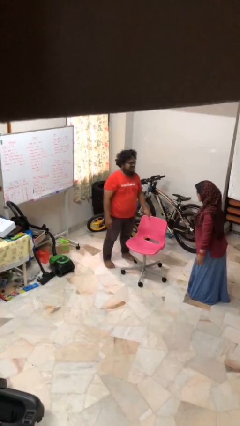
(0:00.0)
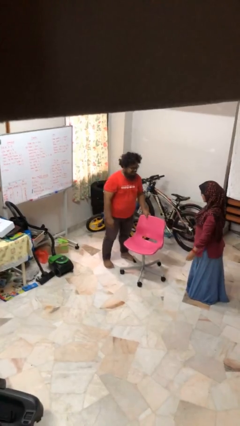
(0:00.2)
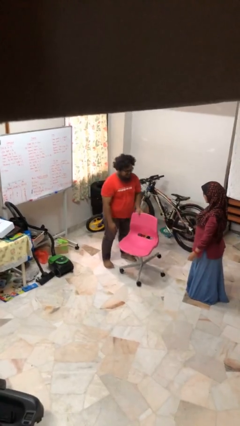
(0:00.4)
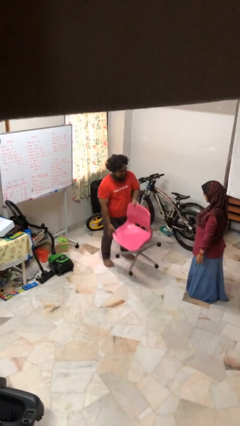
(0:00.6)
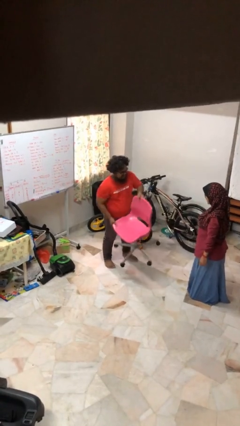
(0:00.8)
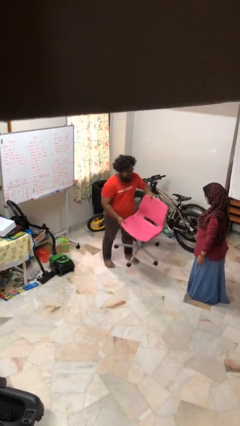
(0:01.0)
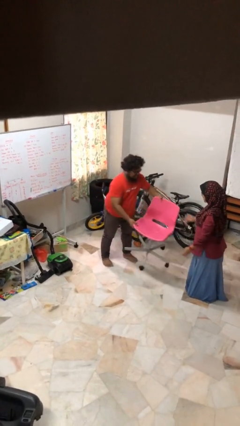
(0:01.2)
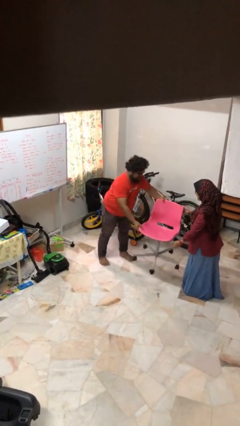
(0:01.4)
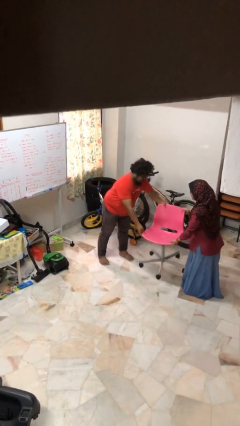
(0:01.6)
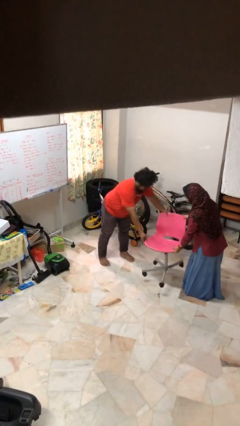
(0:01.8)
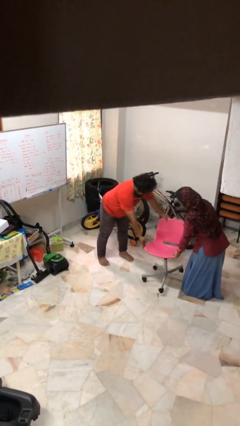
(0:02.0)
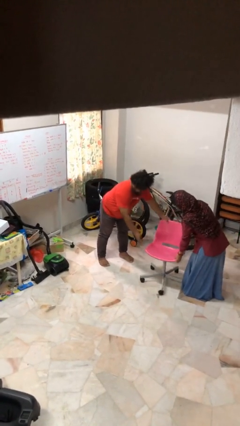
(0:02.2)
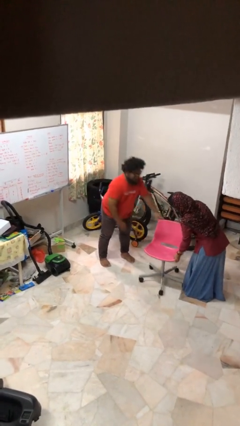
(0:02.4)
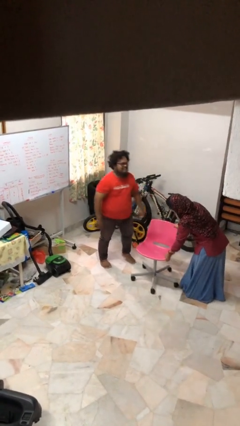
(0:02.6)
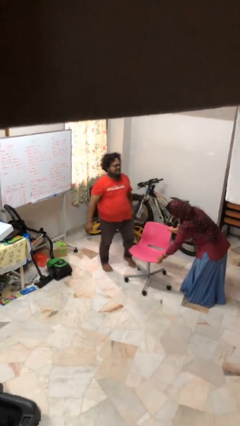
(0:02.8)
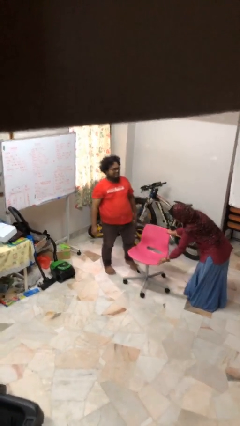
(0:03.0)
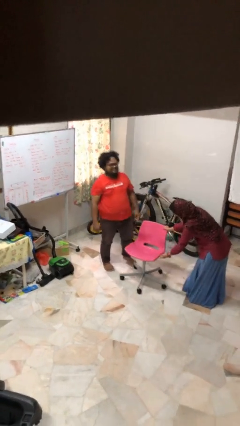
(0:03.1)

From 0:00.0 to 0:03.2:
person transfers object to person

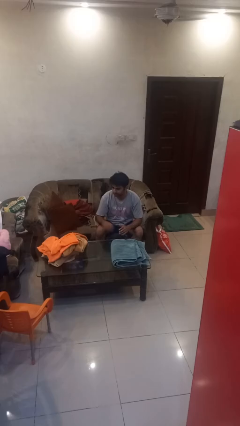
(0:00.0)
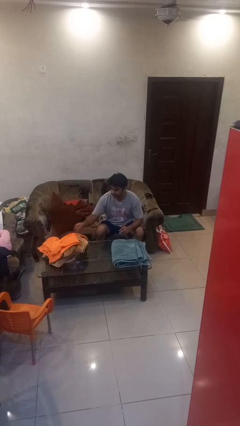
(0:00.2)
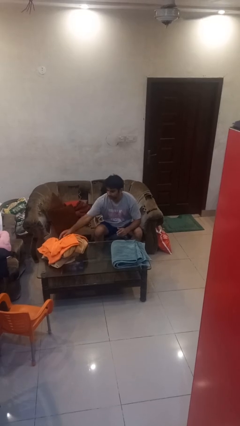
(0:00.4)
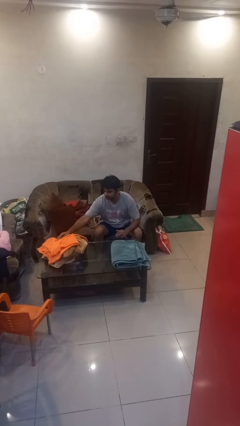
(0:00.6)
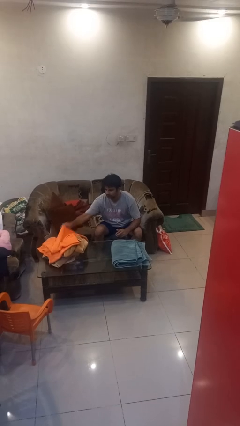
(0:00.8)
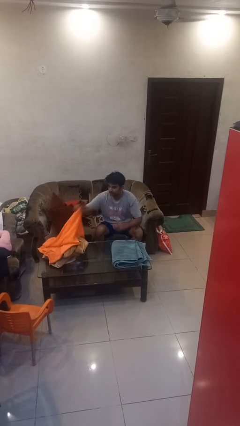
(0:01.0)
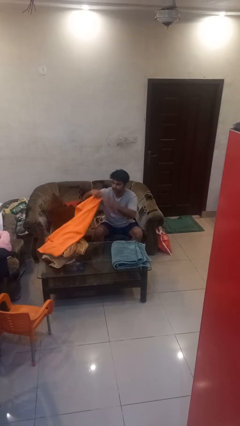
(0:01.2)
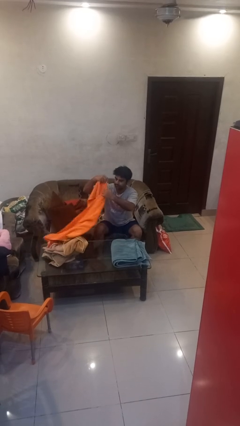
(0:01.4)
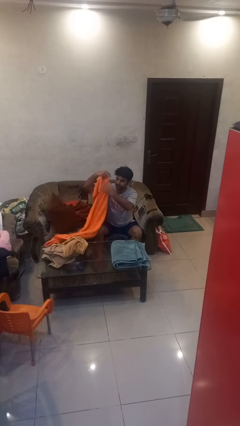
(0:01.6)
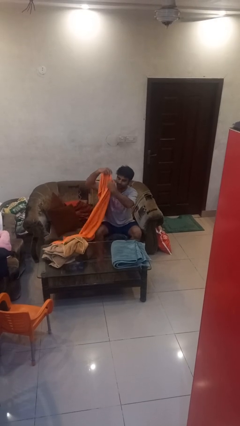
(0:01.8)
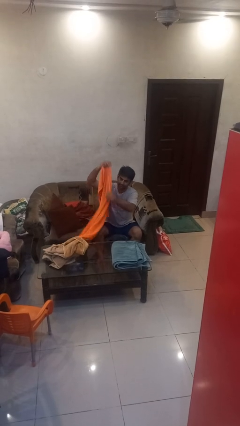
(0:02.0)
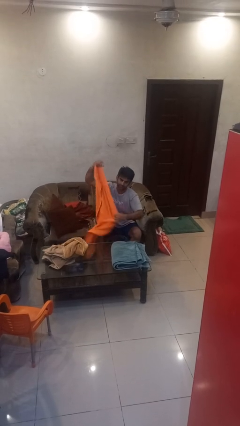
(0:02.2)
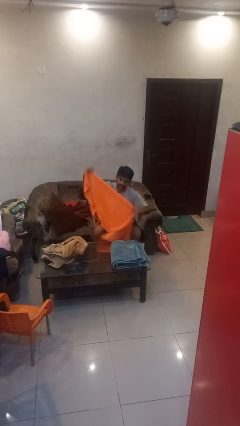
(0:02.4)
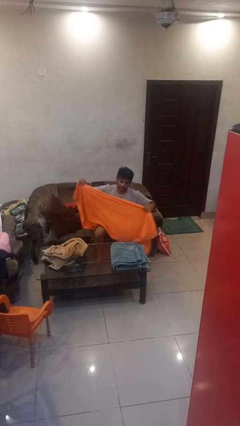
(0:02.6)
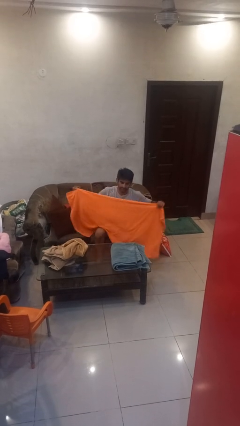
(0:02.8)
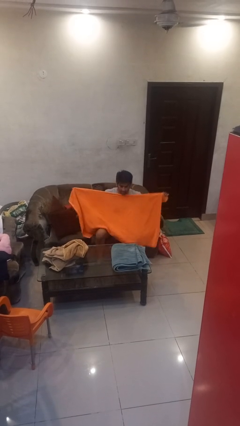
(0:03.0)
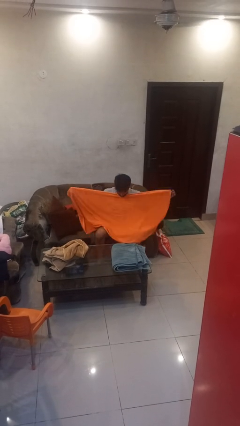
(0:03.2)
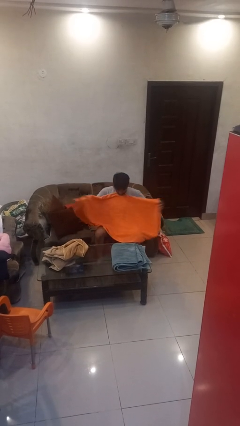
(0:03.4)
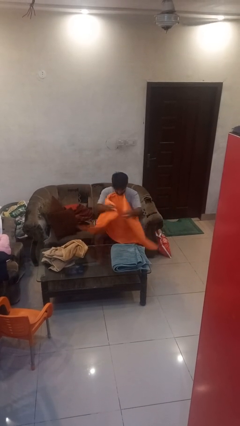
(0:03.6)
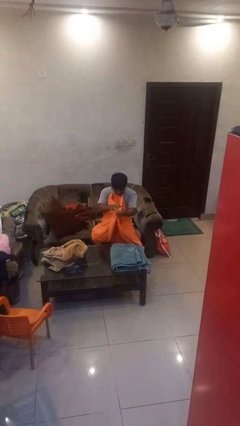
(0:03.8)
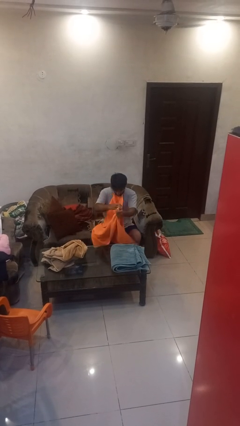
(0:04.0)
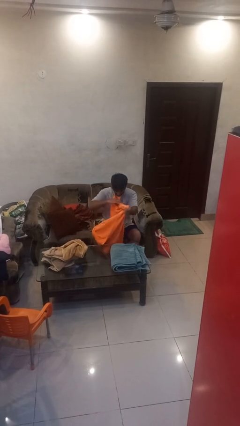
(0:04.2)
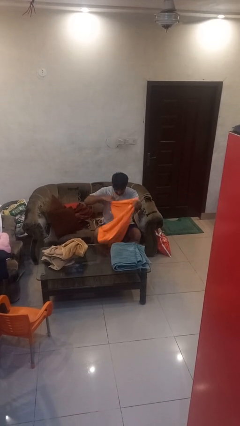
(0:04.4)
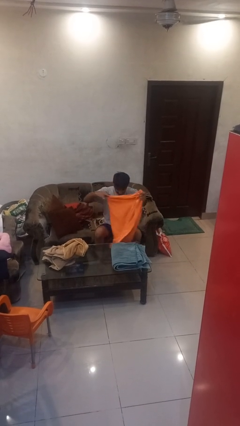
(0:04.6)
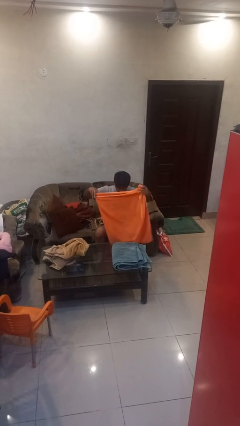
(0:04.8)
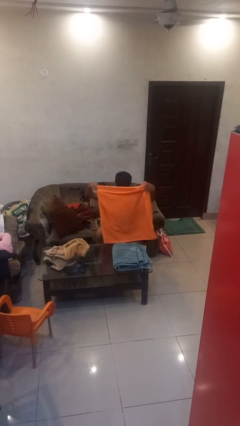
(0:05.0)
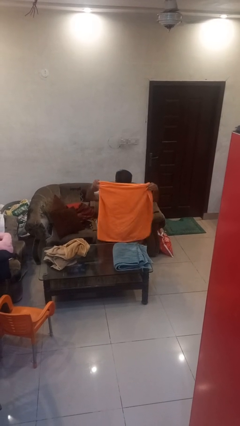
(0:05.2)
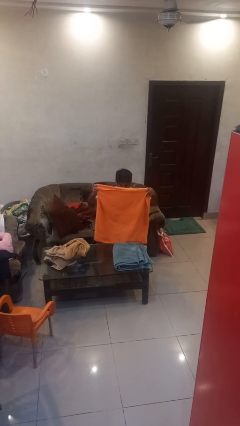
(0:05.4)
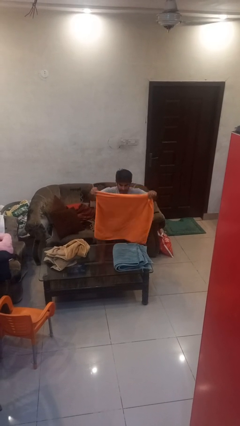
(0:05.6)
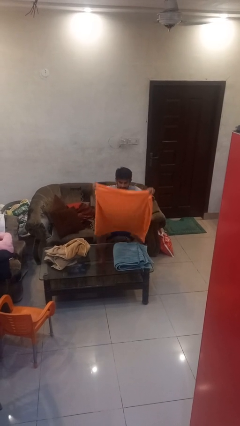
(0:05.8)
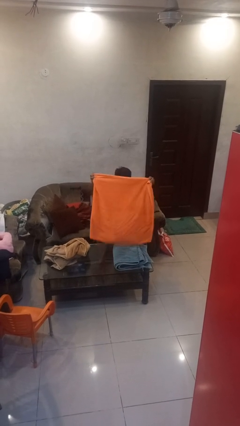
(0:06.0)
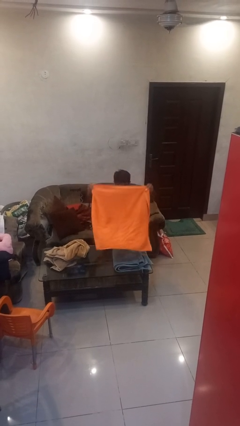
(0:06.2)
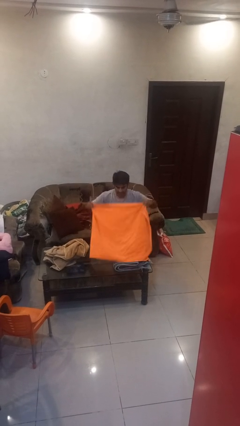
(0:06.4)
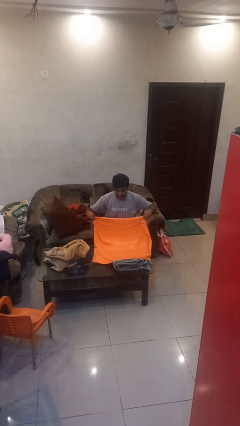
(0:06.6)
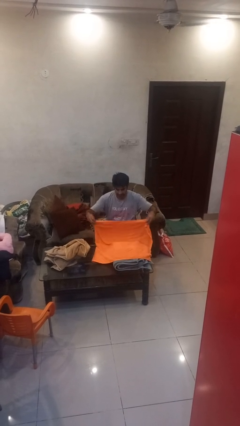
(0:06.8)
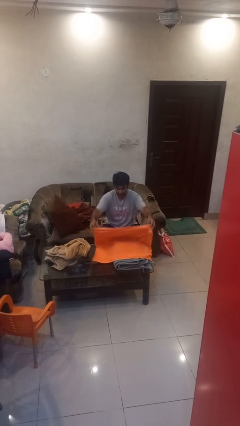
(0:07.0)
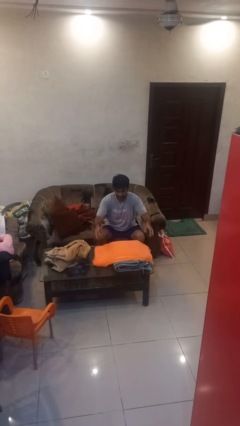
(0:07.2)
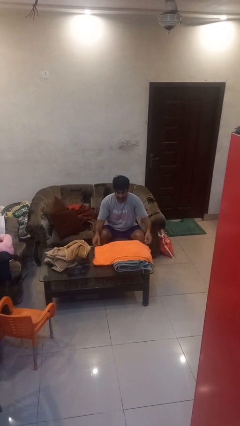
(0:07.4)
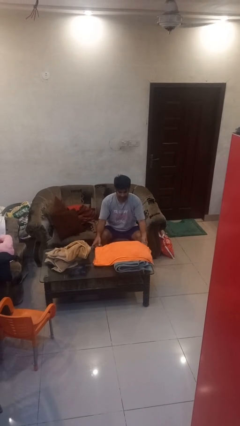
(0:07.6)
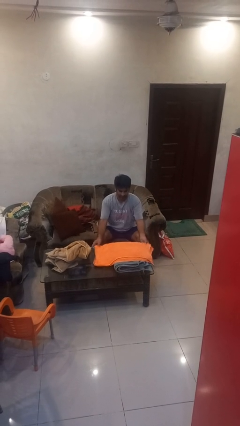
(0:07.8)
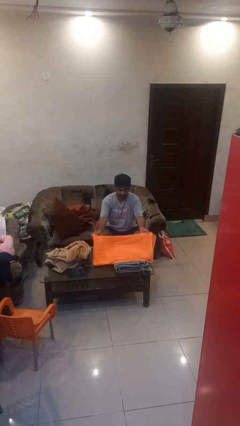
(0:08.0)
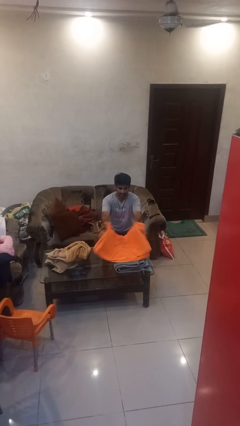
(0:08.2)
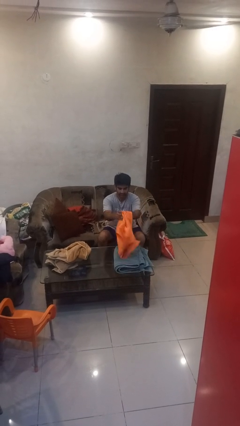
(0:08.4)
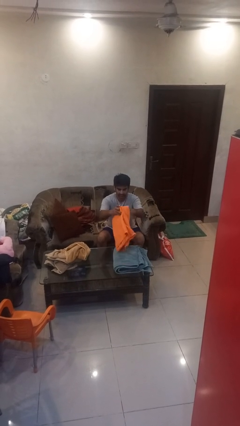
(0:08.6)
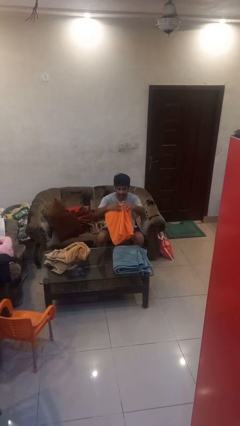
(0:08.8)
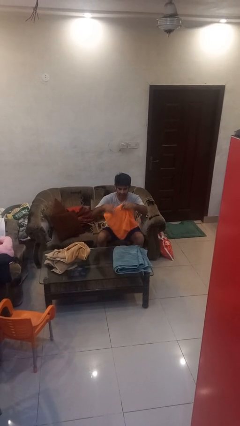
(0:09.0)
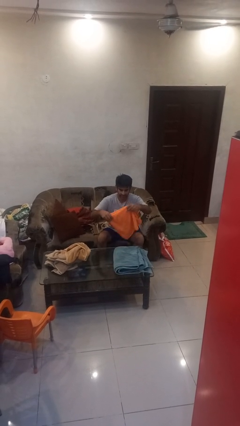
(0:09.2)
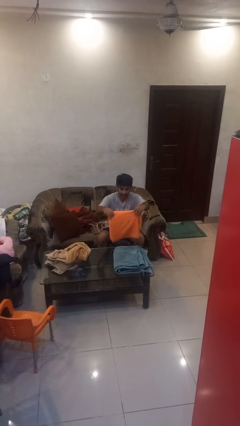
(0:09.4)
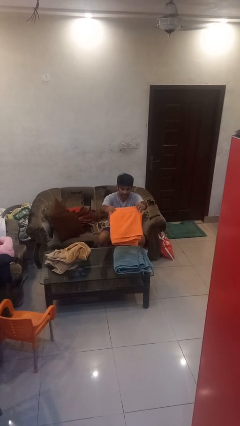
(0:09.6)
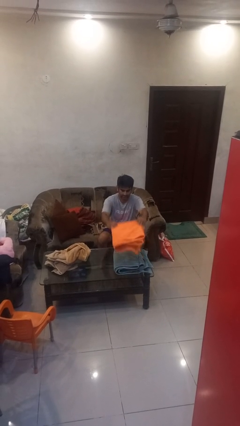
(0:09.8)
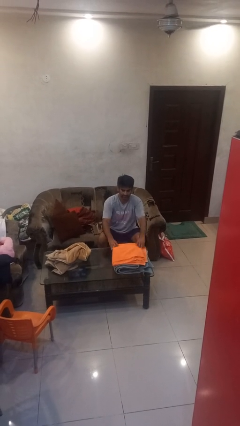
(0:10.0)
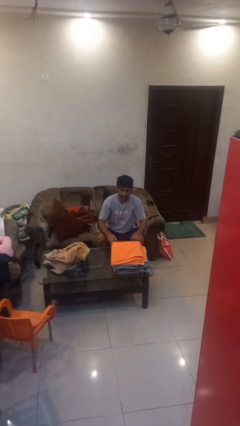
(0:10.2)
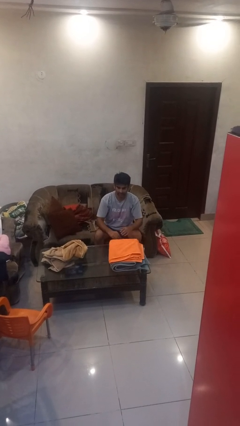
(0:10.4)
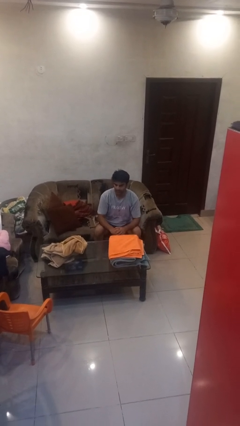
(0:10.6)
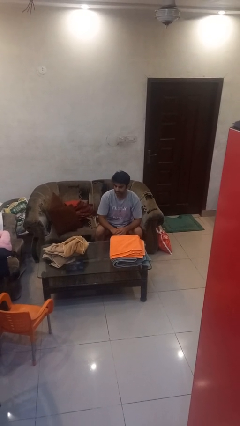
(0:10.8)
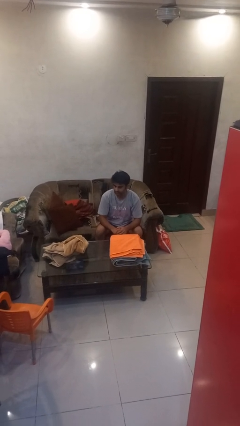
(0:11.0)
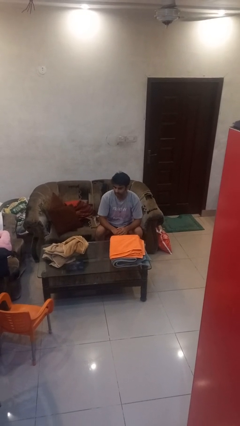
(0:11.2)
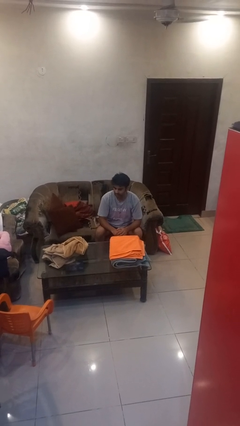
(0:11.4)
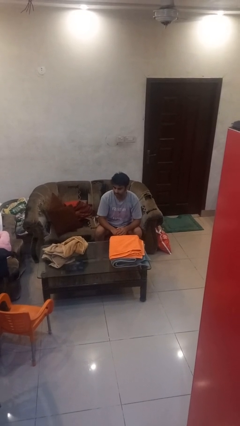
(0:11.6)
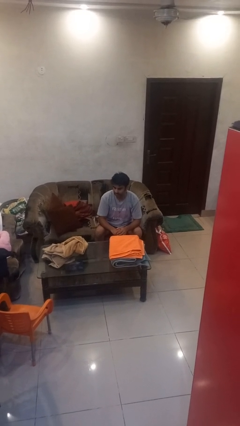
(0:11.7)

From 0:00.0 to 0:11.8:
person folds towel

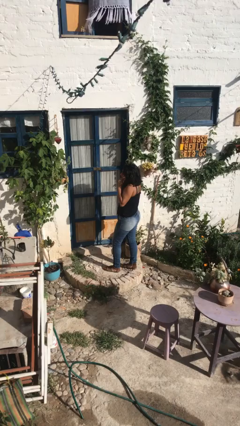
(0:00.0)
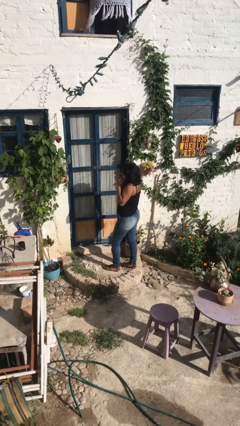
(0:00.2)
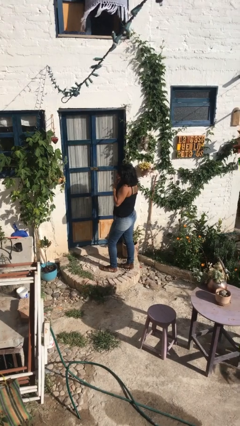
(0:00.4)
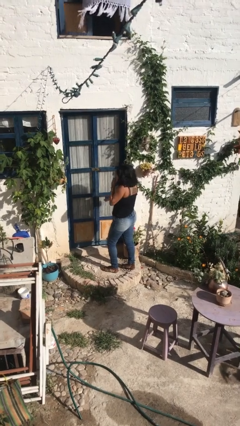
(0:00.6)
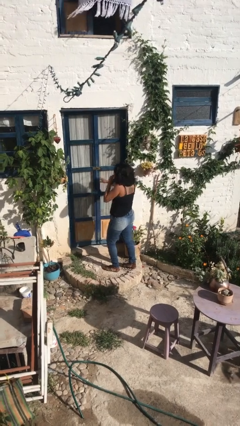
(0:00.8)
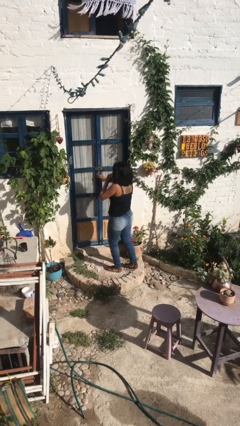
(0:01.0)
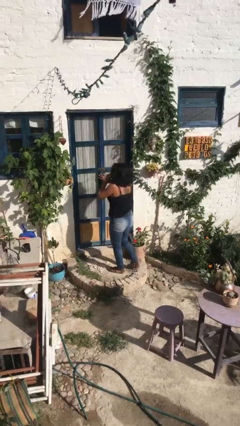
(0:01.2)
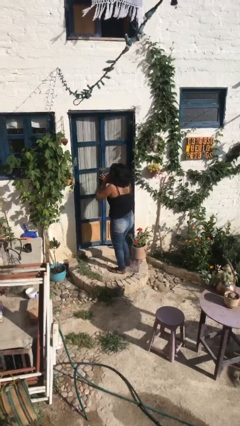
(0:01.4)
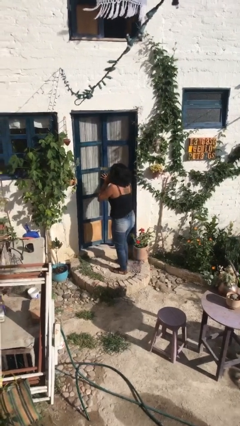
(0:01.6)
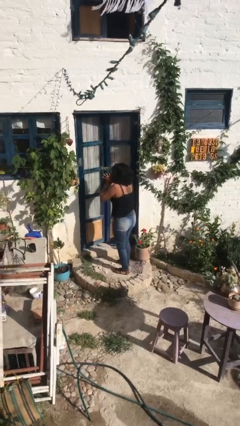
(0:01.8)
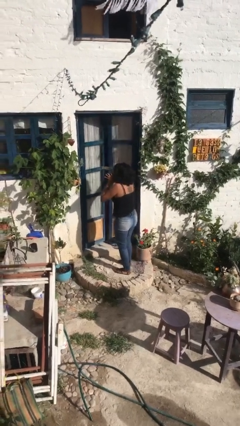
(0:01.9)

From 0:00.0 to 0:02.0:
person opens facility door

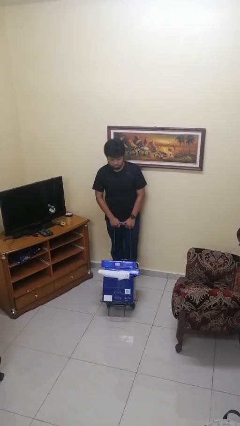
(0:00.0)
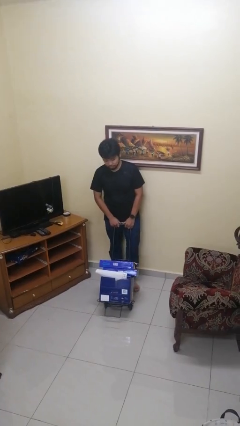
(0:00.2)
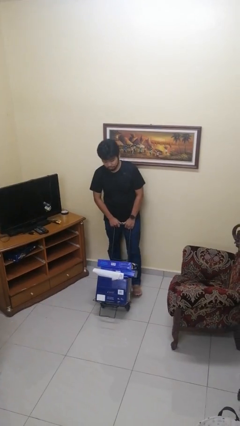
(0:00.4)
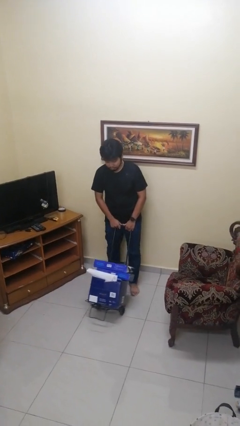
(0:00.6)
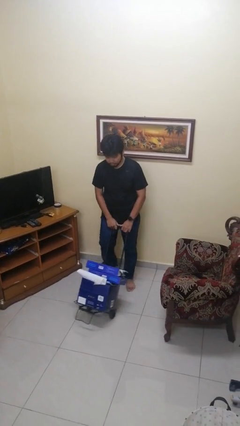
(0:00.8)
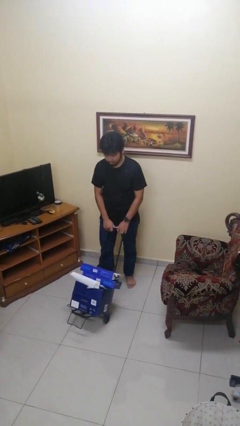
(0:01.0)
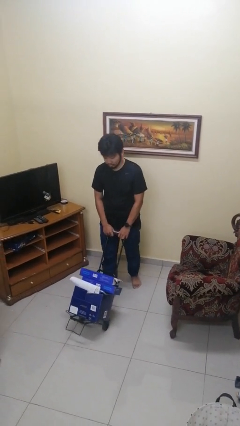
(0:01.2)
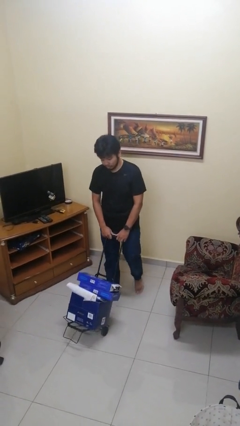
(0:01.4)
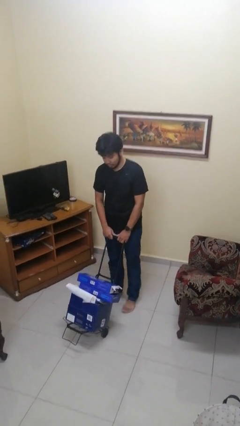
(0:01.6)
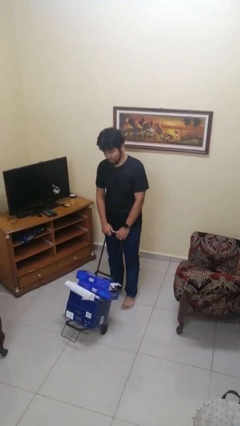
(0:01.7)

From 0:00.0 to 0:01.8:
person pushes wheeled cart
